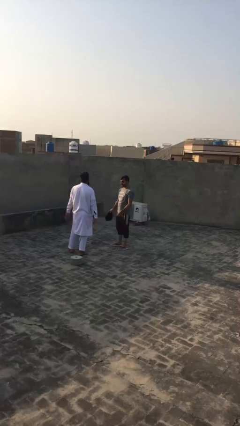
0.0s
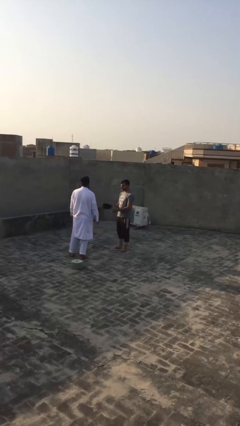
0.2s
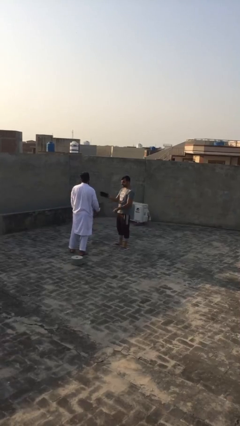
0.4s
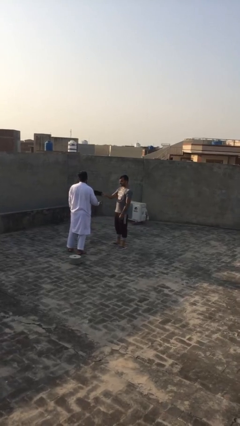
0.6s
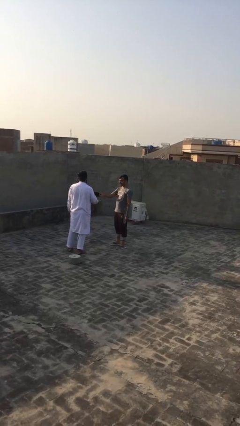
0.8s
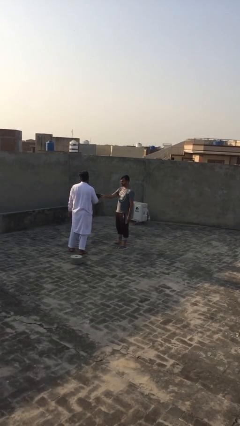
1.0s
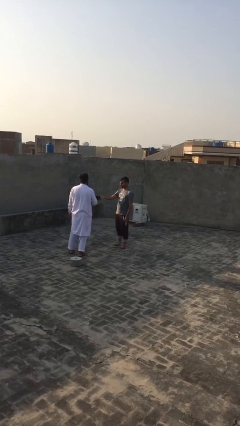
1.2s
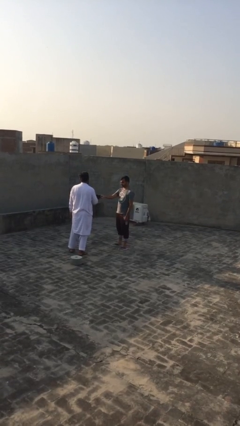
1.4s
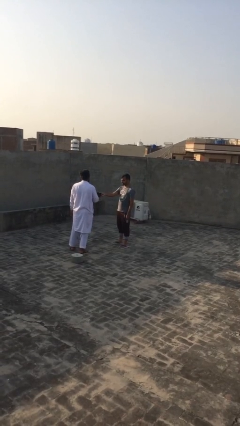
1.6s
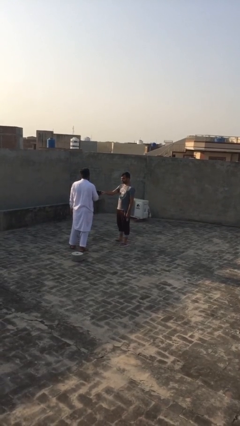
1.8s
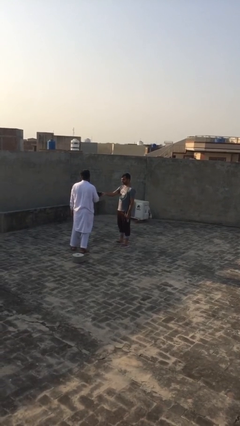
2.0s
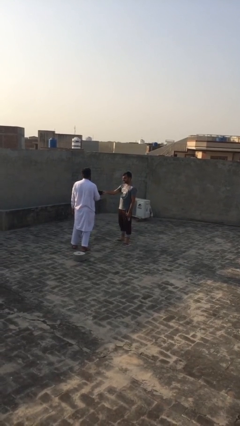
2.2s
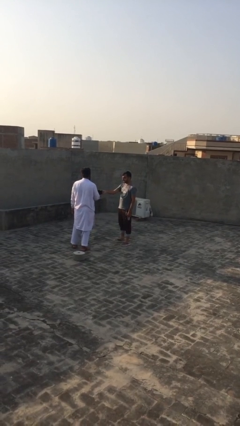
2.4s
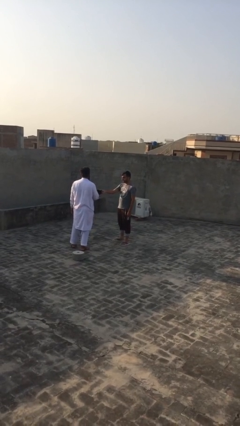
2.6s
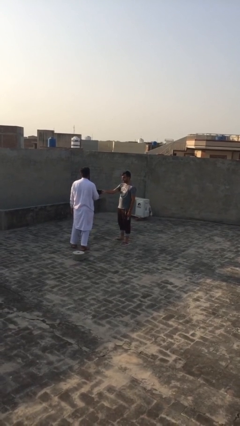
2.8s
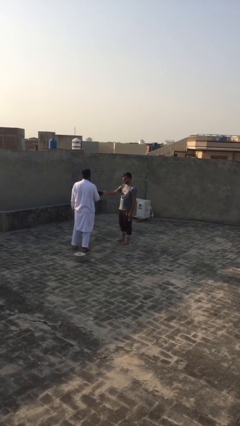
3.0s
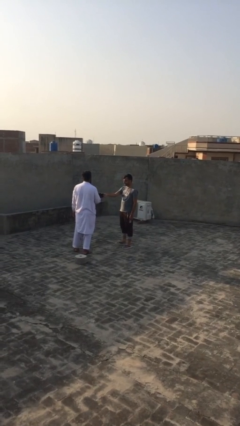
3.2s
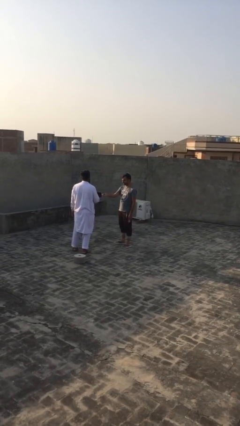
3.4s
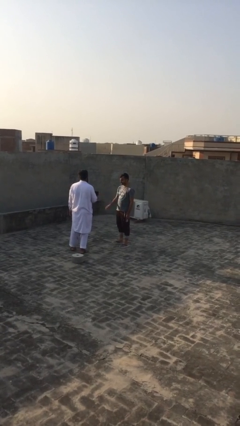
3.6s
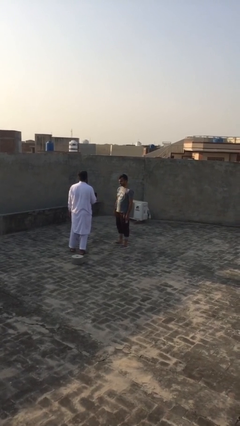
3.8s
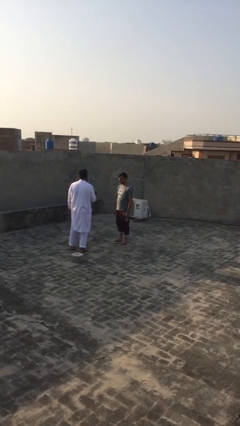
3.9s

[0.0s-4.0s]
person transfers object to person

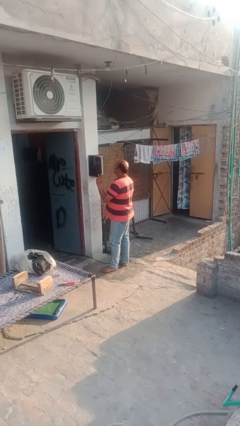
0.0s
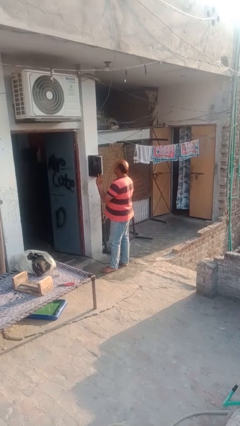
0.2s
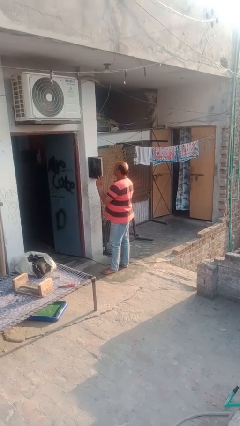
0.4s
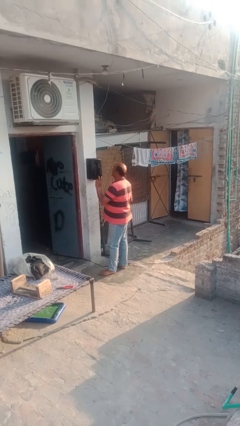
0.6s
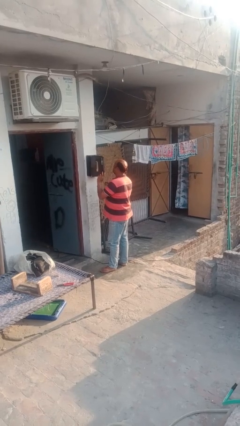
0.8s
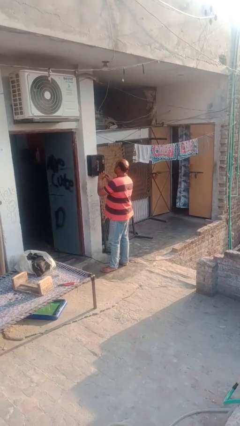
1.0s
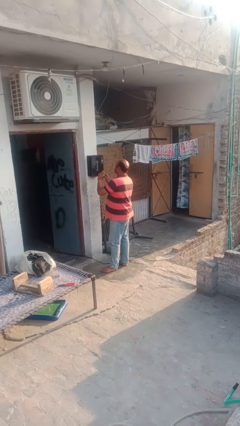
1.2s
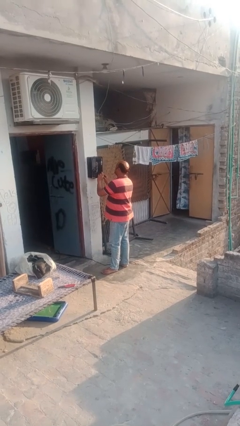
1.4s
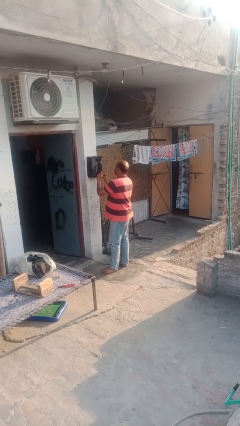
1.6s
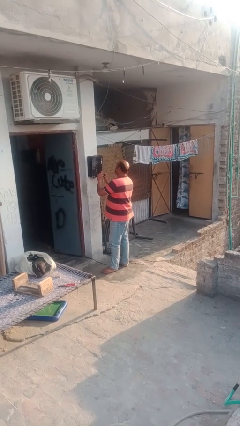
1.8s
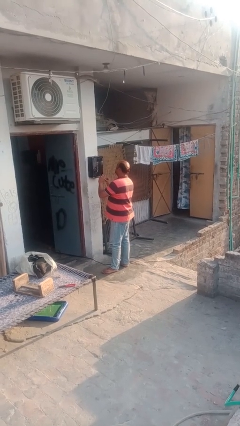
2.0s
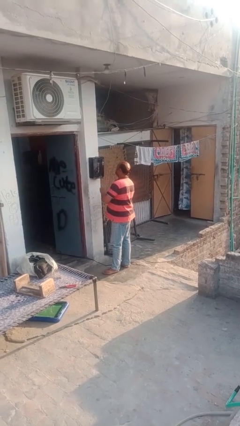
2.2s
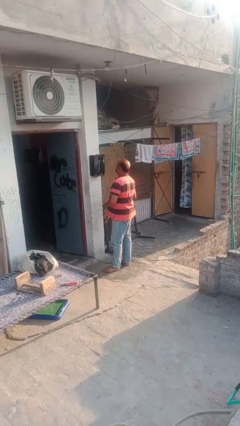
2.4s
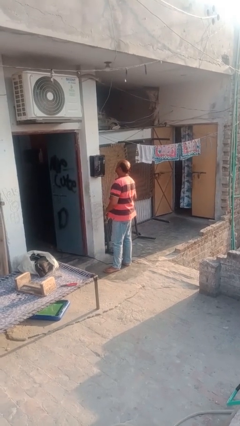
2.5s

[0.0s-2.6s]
person closes mailbox

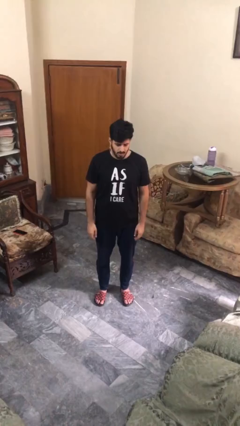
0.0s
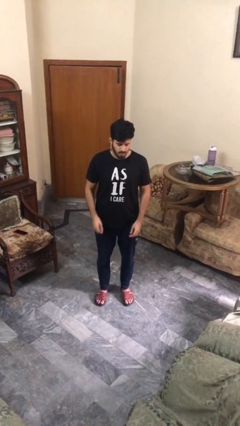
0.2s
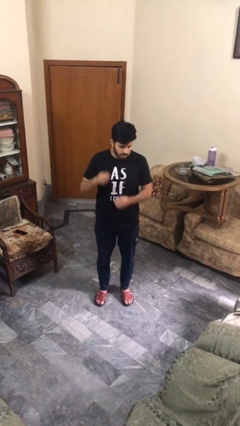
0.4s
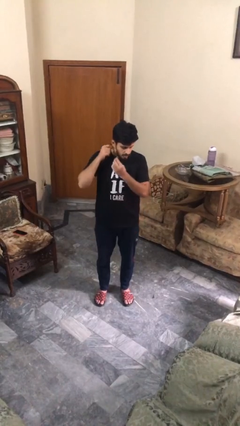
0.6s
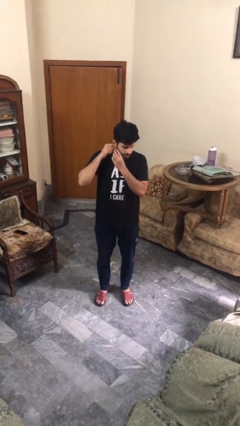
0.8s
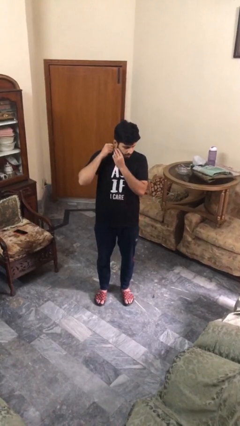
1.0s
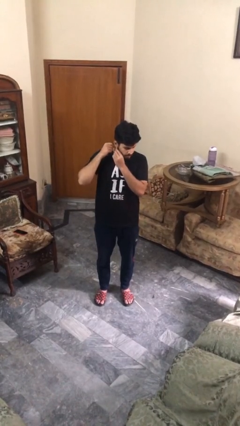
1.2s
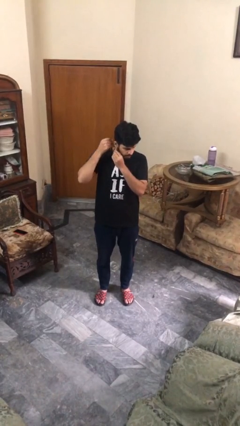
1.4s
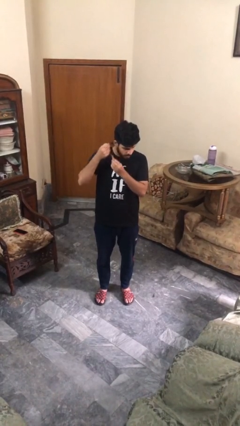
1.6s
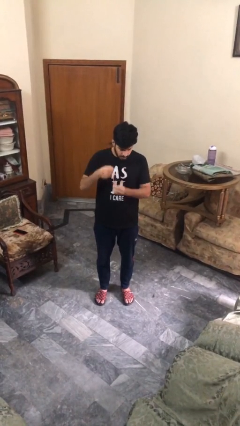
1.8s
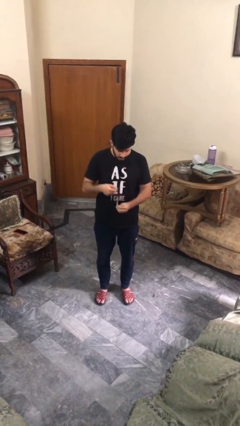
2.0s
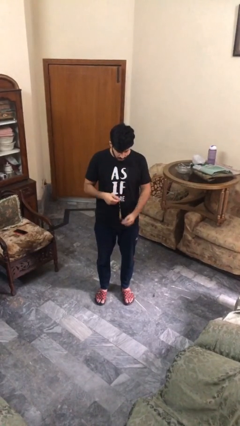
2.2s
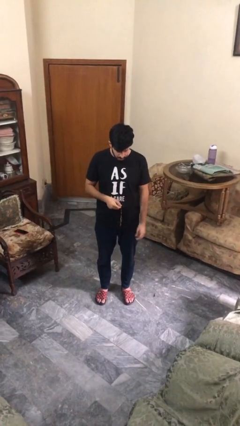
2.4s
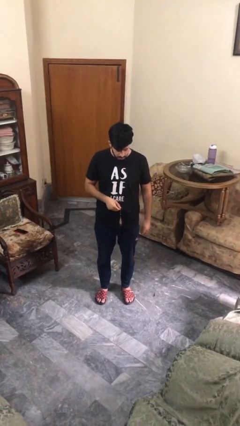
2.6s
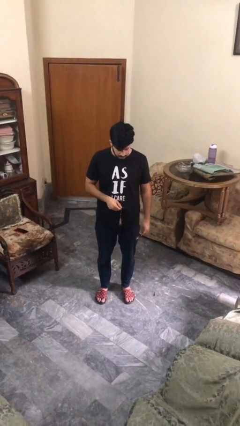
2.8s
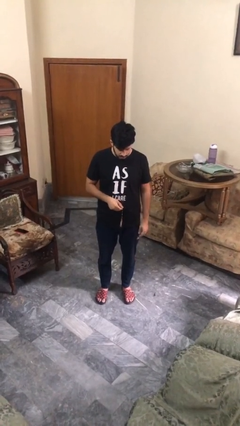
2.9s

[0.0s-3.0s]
person takes off earrings

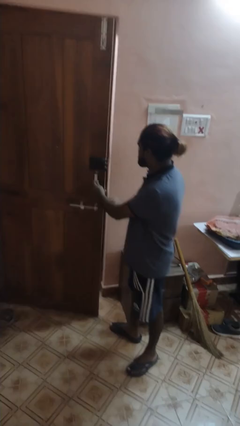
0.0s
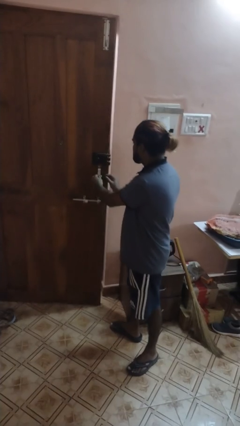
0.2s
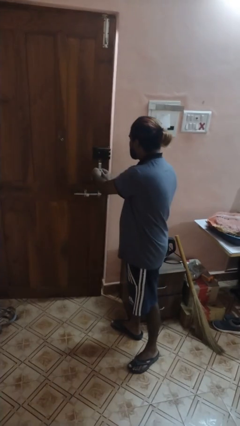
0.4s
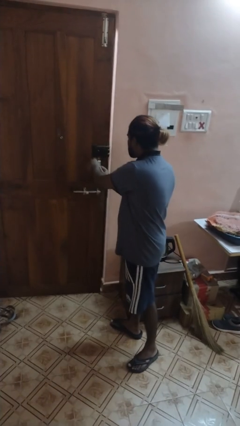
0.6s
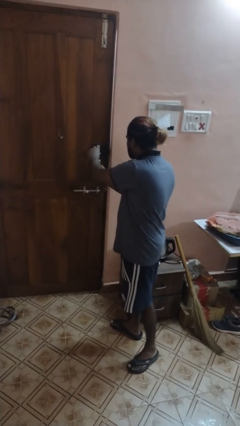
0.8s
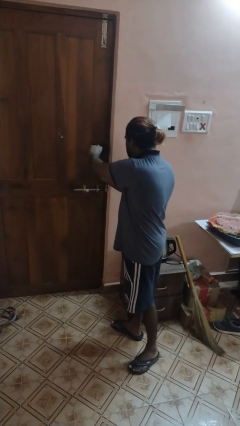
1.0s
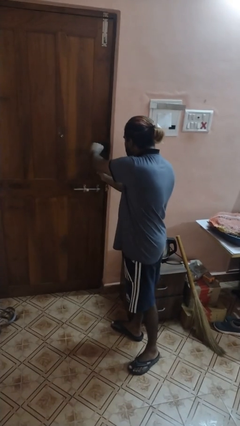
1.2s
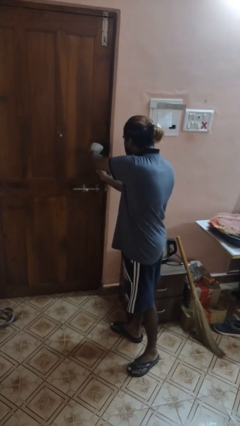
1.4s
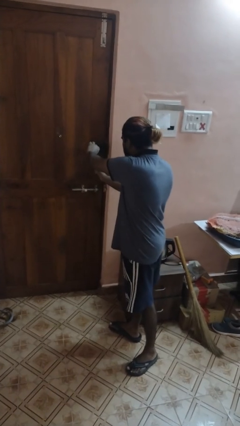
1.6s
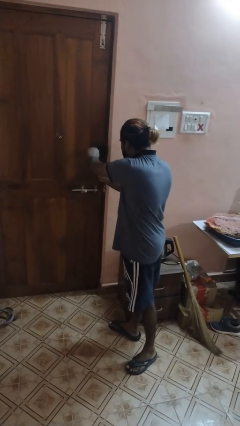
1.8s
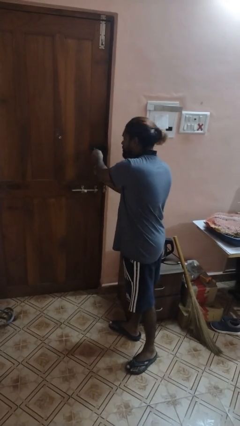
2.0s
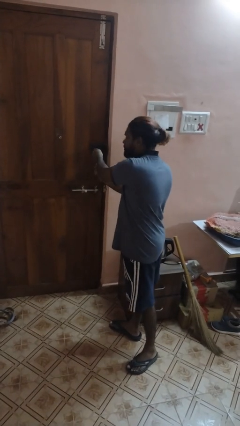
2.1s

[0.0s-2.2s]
person closes facility door

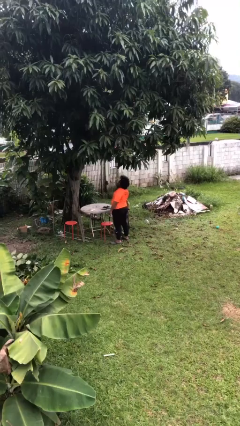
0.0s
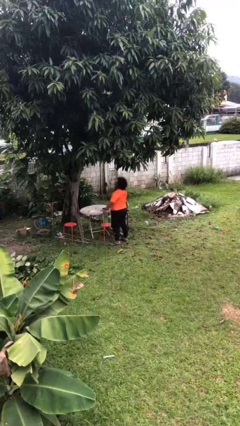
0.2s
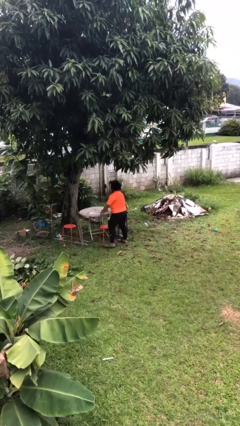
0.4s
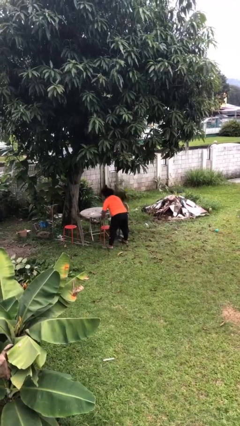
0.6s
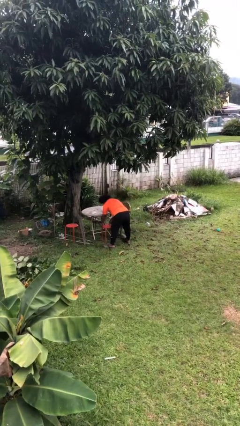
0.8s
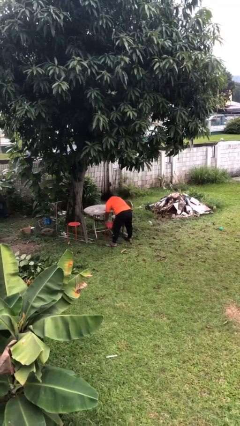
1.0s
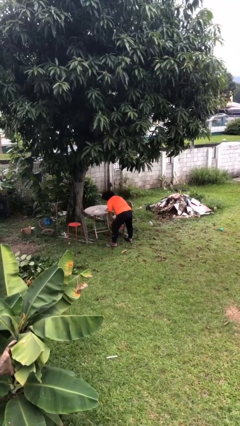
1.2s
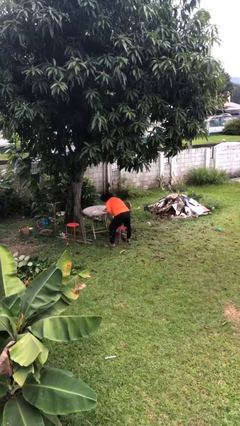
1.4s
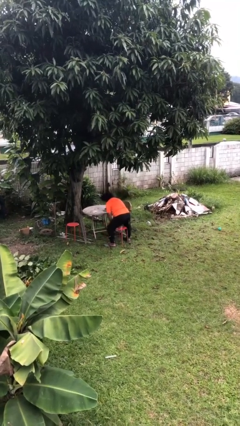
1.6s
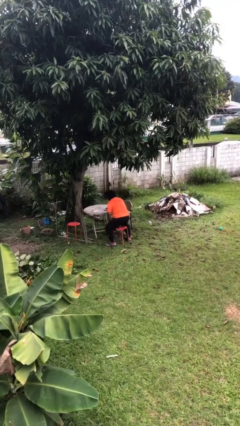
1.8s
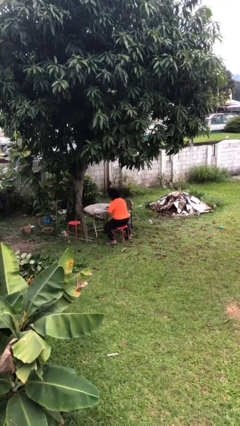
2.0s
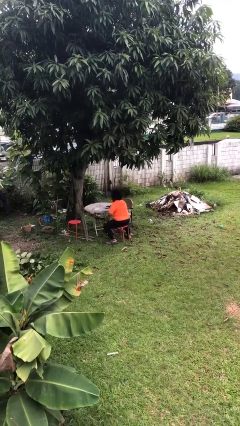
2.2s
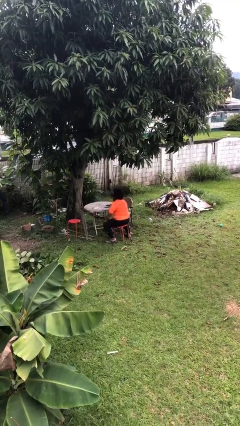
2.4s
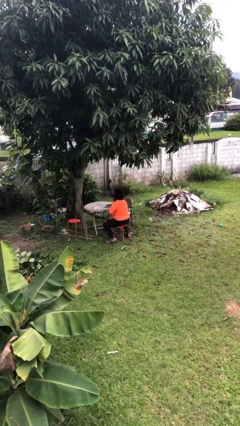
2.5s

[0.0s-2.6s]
person sits down

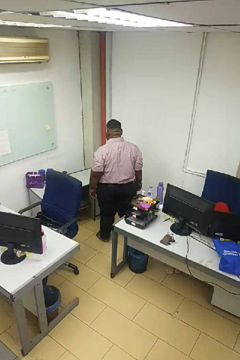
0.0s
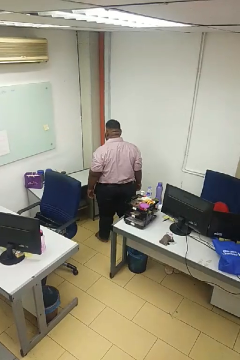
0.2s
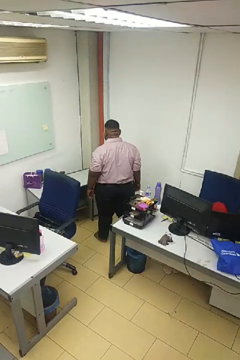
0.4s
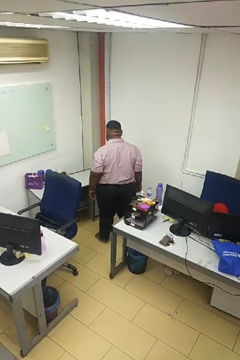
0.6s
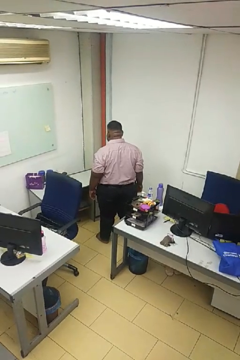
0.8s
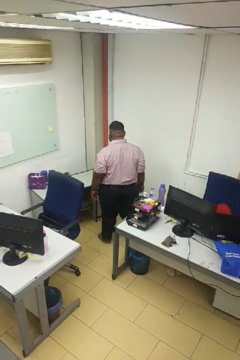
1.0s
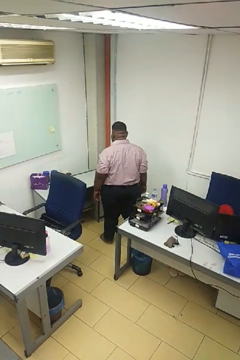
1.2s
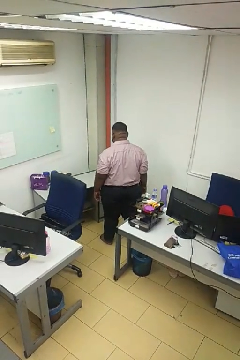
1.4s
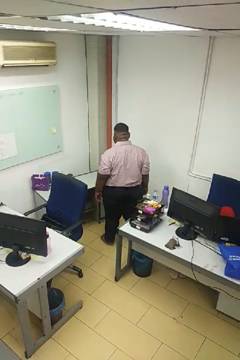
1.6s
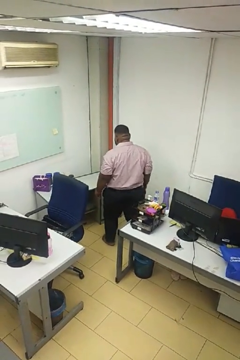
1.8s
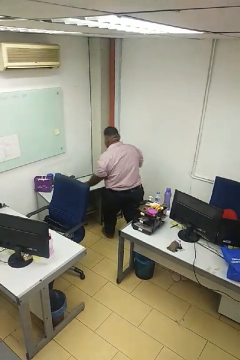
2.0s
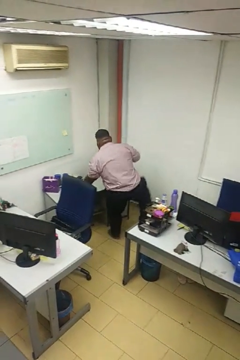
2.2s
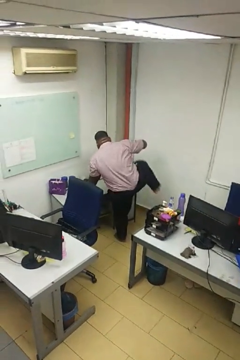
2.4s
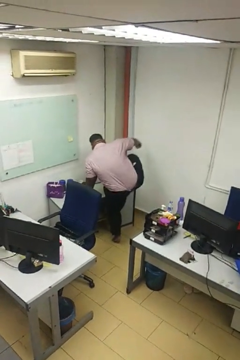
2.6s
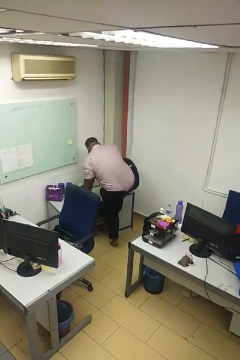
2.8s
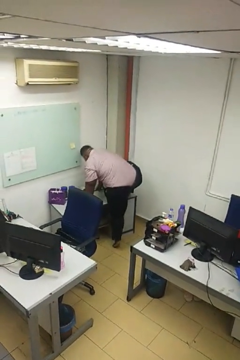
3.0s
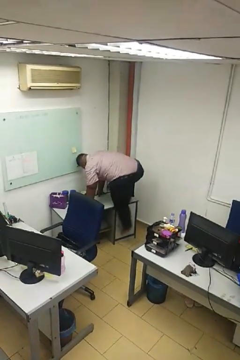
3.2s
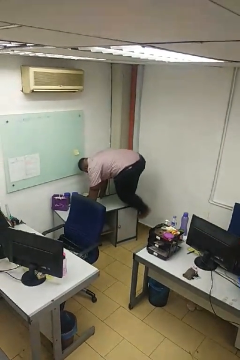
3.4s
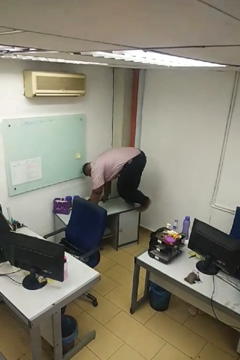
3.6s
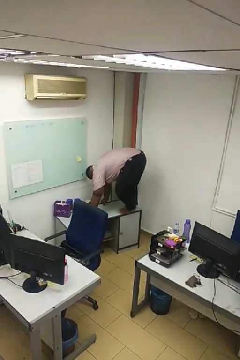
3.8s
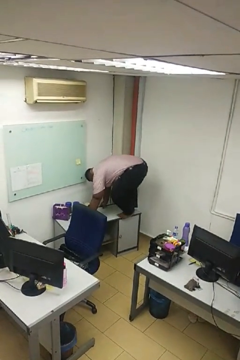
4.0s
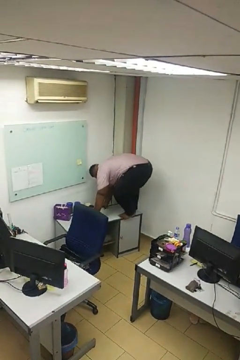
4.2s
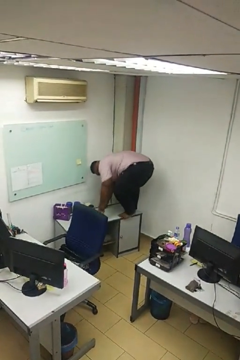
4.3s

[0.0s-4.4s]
person climbs on table
